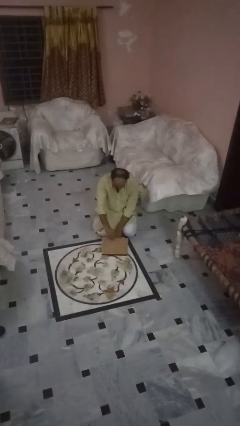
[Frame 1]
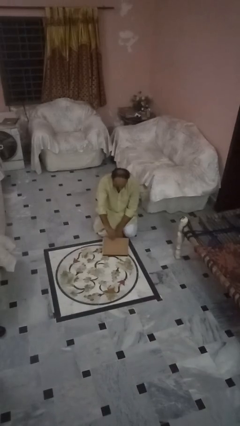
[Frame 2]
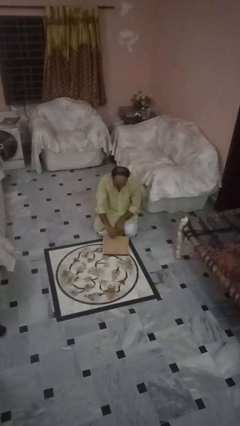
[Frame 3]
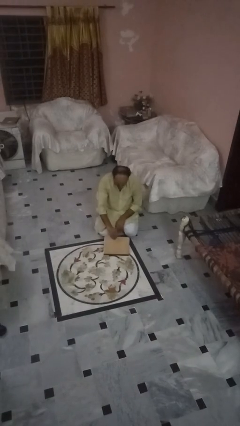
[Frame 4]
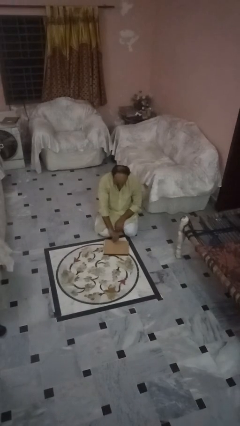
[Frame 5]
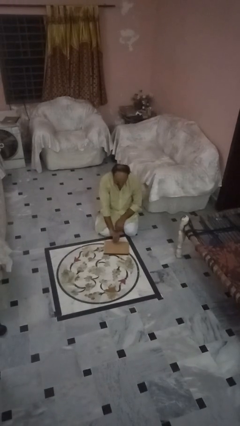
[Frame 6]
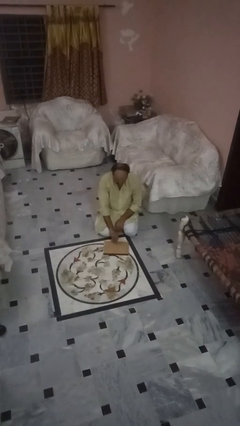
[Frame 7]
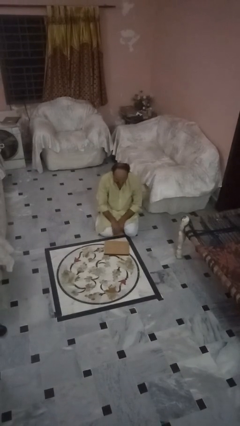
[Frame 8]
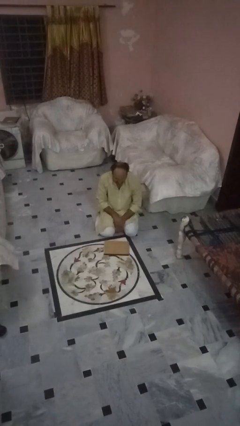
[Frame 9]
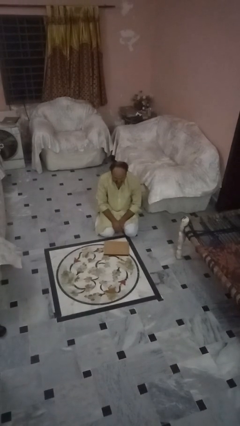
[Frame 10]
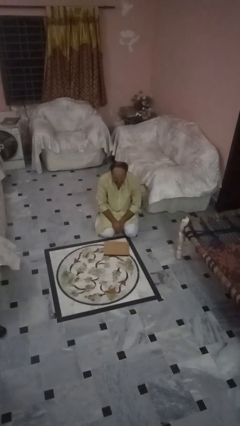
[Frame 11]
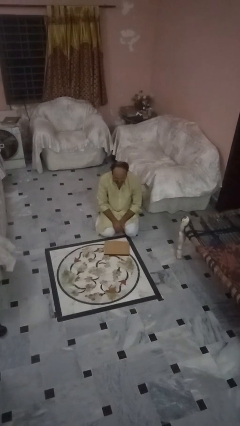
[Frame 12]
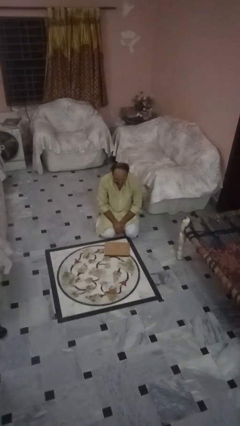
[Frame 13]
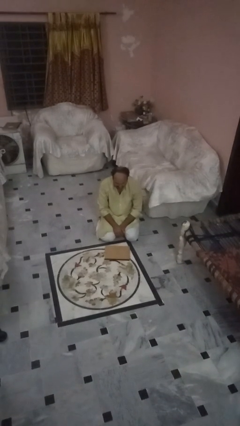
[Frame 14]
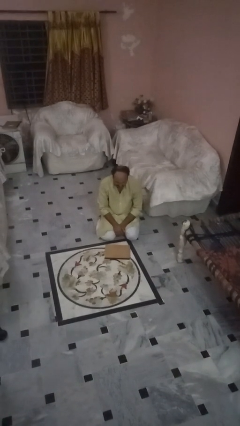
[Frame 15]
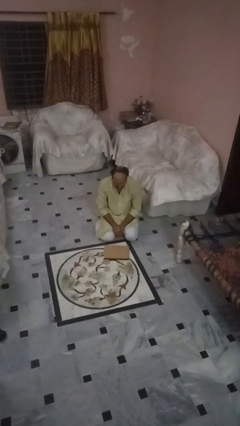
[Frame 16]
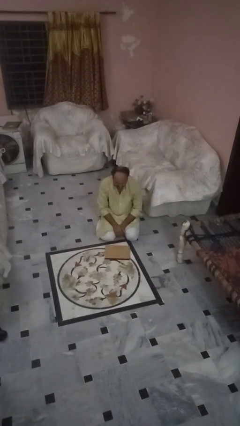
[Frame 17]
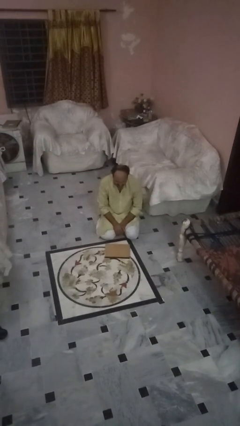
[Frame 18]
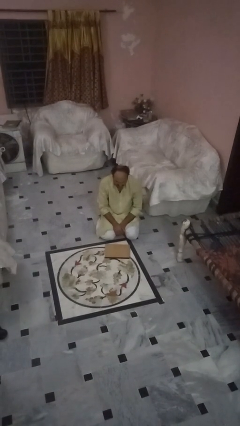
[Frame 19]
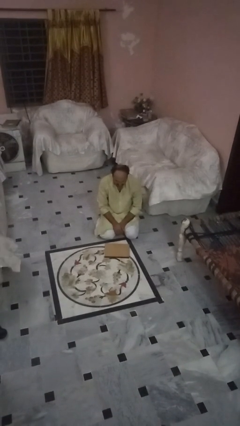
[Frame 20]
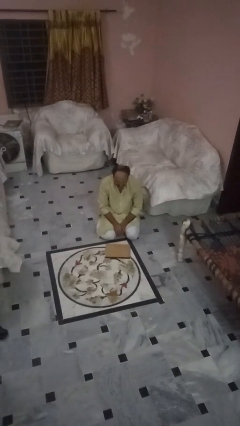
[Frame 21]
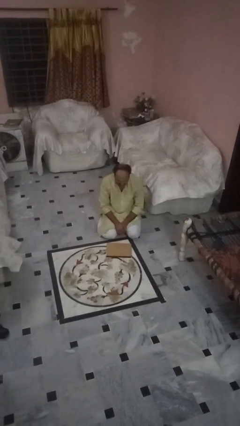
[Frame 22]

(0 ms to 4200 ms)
person closes laptop

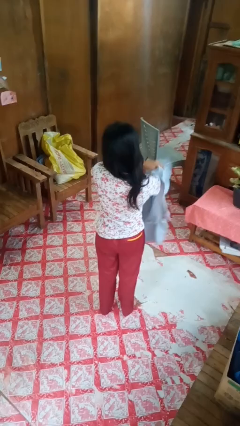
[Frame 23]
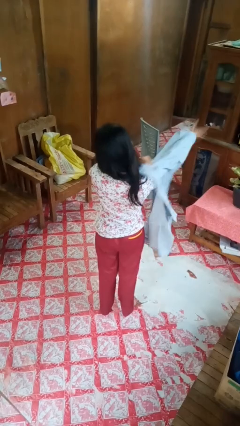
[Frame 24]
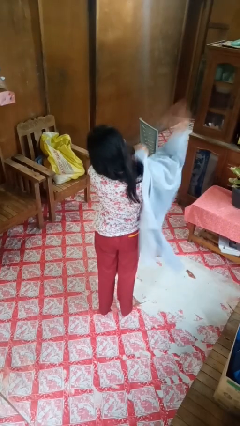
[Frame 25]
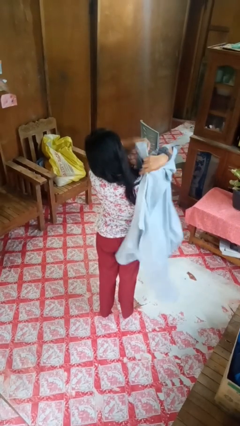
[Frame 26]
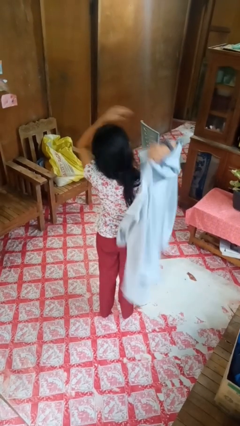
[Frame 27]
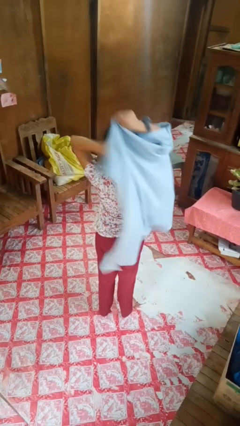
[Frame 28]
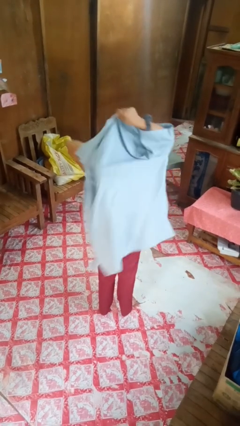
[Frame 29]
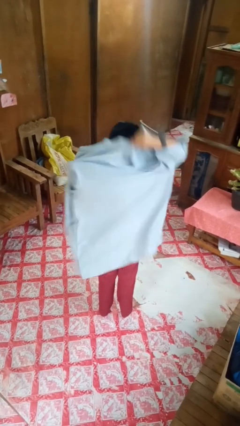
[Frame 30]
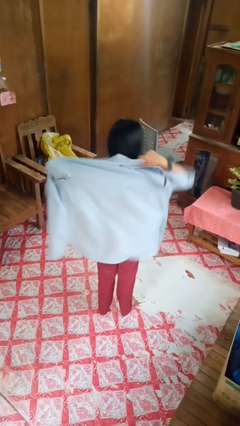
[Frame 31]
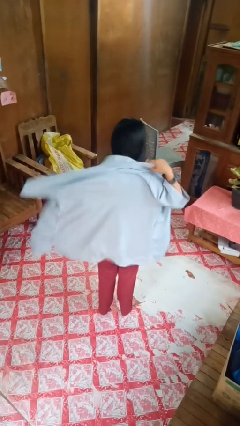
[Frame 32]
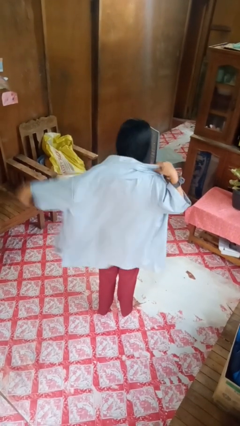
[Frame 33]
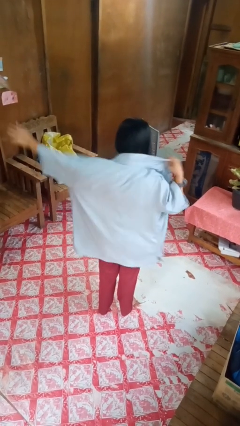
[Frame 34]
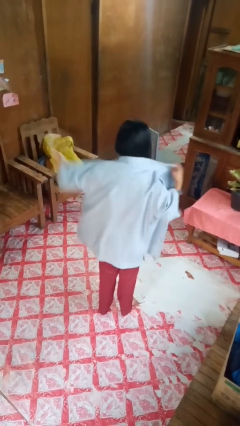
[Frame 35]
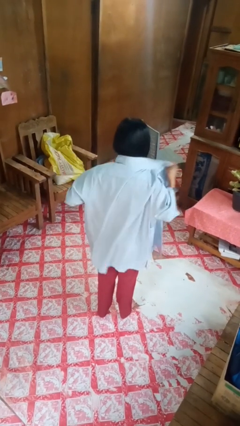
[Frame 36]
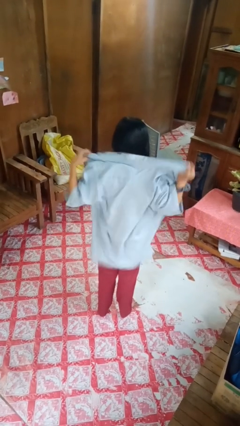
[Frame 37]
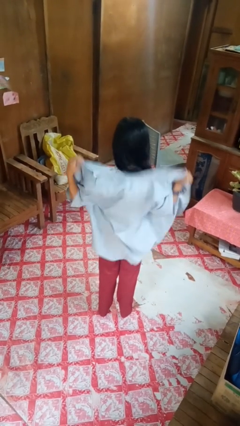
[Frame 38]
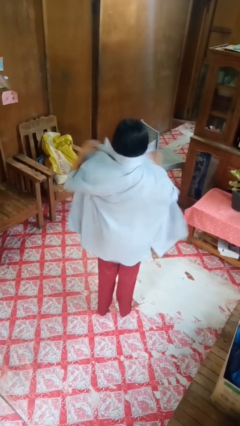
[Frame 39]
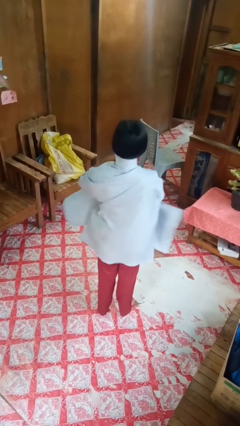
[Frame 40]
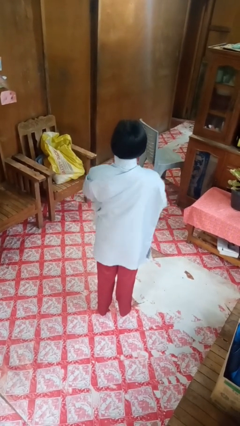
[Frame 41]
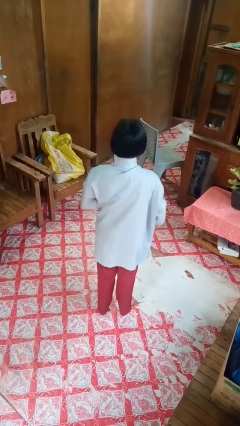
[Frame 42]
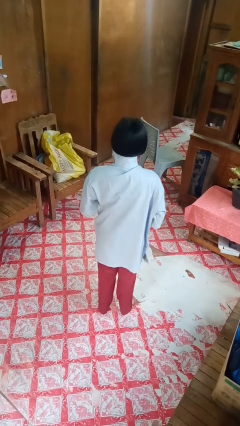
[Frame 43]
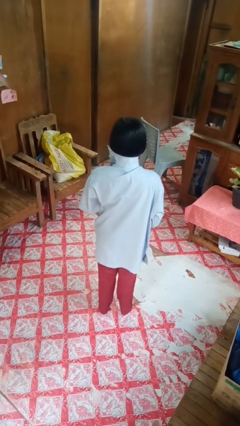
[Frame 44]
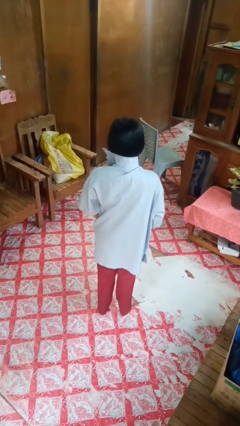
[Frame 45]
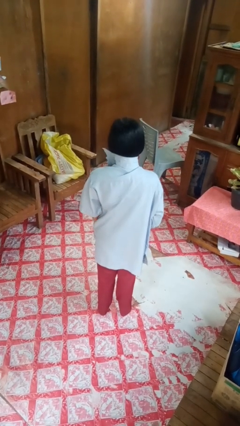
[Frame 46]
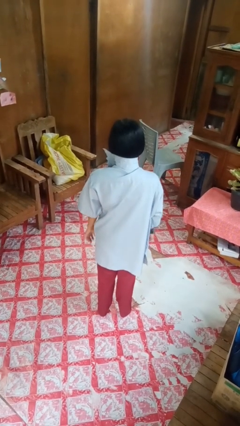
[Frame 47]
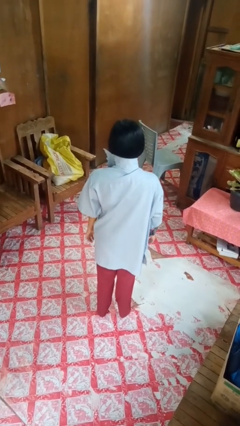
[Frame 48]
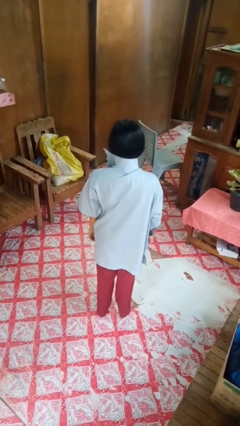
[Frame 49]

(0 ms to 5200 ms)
person puts on shirt

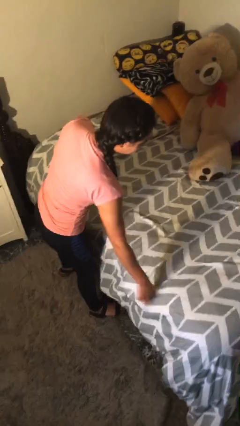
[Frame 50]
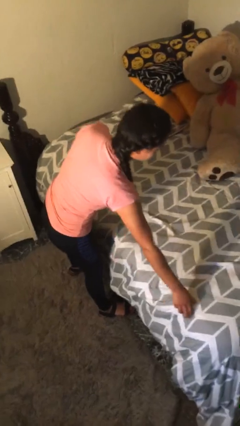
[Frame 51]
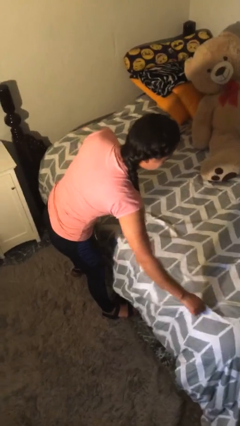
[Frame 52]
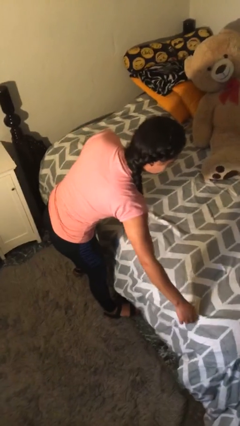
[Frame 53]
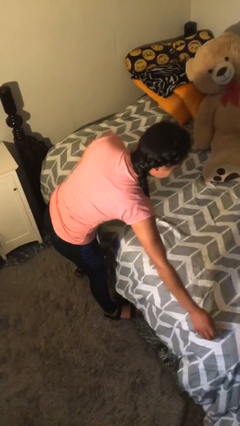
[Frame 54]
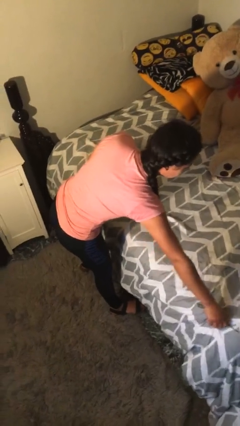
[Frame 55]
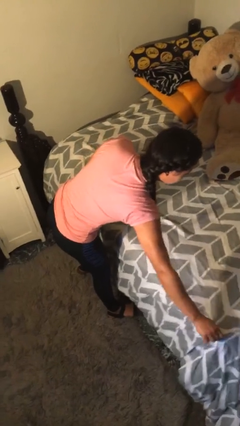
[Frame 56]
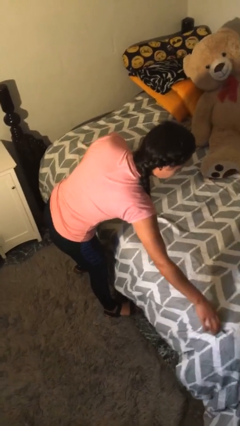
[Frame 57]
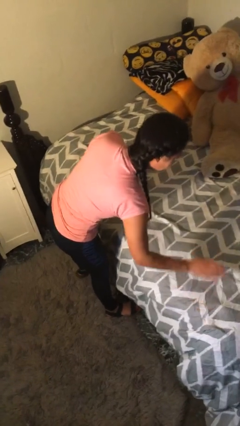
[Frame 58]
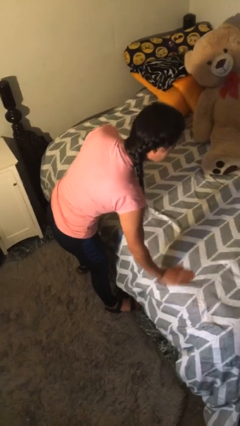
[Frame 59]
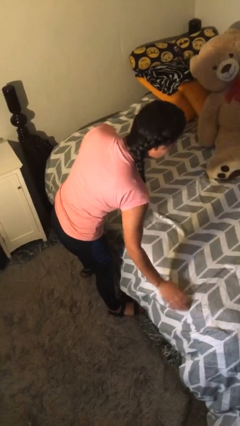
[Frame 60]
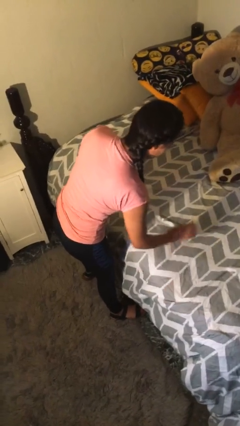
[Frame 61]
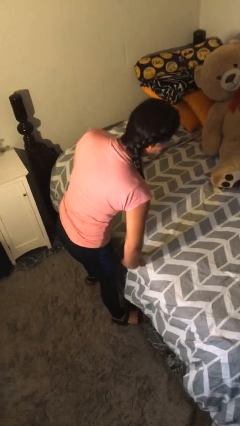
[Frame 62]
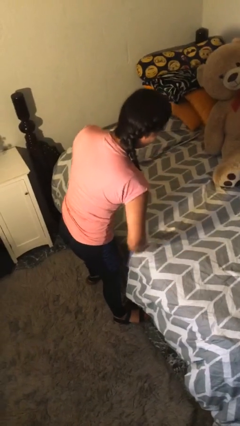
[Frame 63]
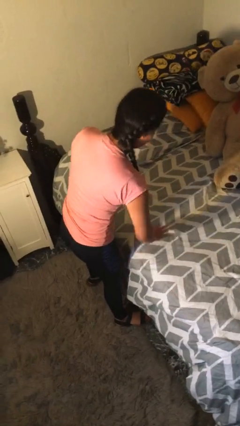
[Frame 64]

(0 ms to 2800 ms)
person makes bed

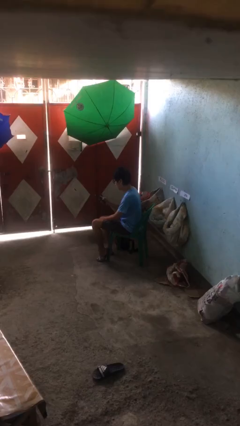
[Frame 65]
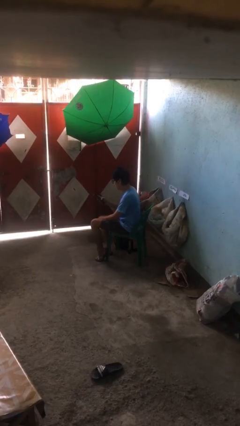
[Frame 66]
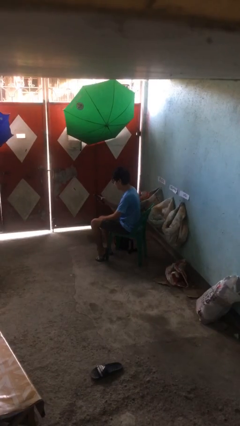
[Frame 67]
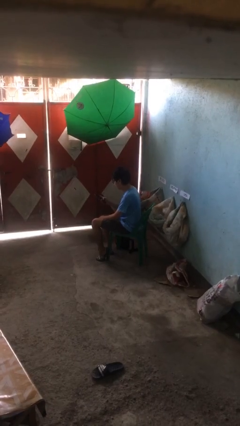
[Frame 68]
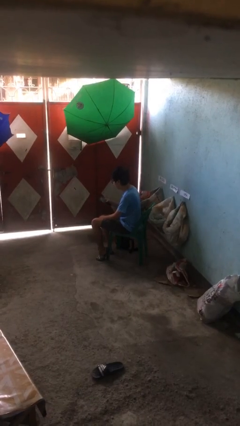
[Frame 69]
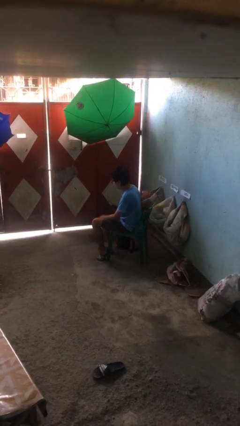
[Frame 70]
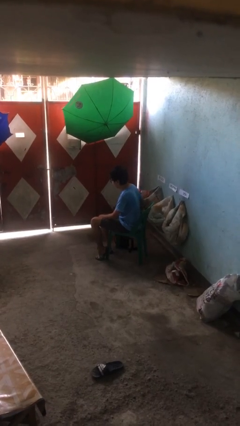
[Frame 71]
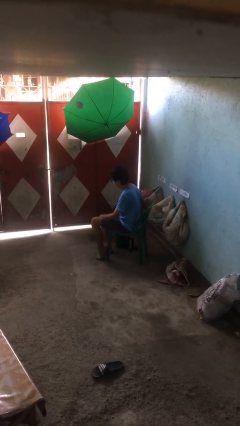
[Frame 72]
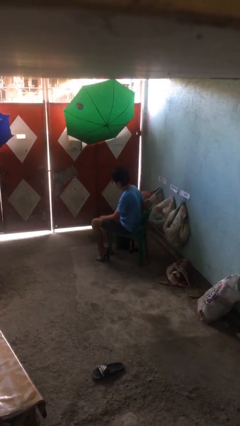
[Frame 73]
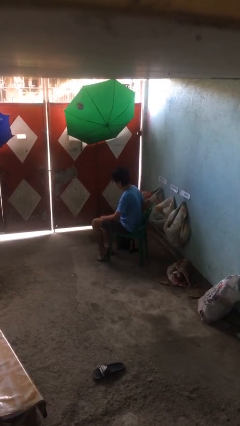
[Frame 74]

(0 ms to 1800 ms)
person puts phone into pocket

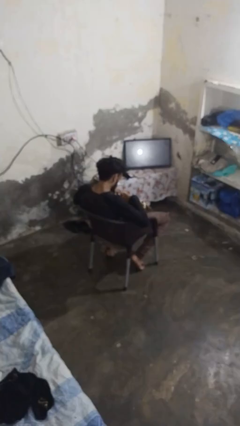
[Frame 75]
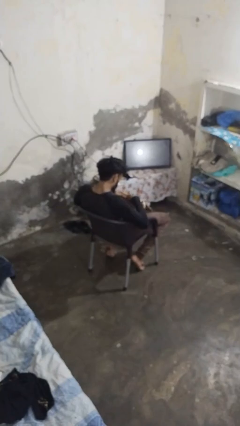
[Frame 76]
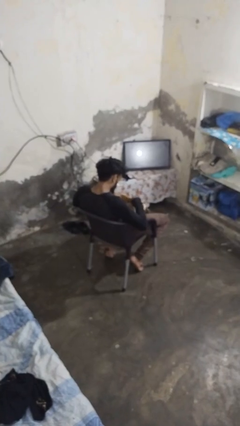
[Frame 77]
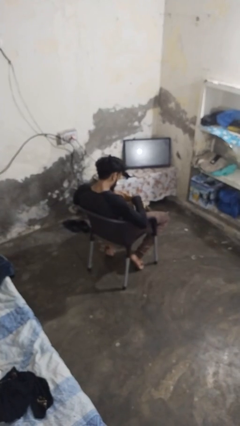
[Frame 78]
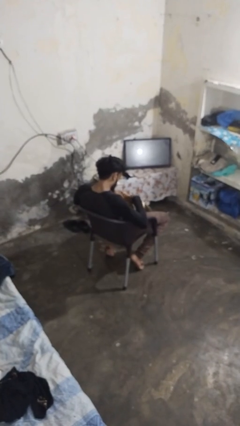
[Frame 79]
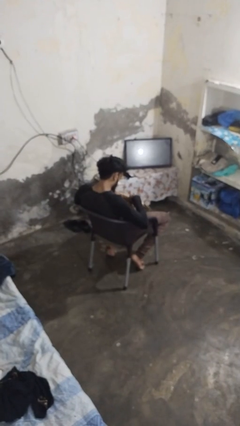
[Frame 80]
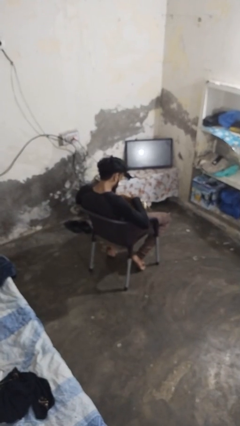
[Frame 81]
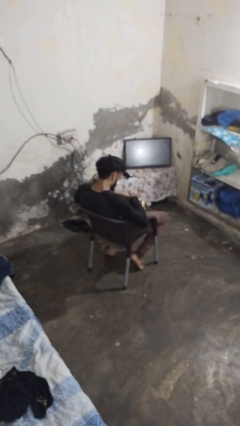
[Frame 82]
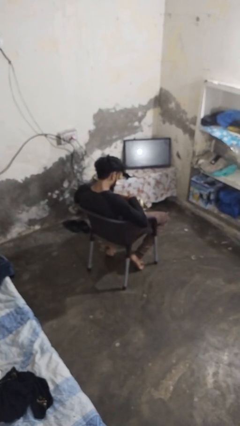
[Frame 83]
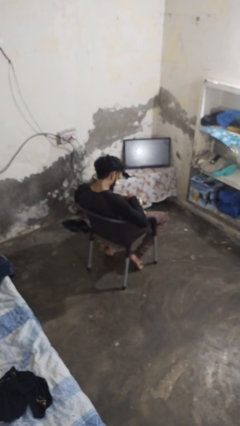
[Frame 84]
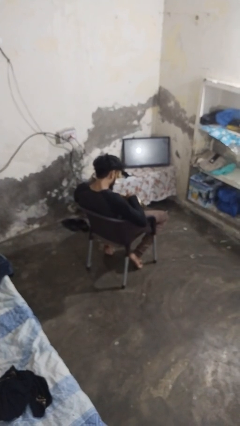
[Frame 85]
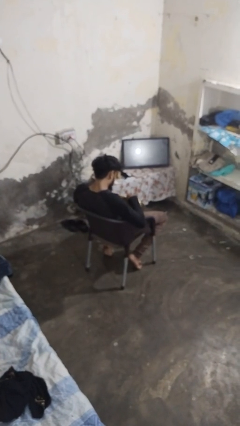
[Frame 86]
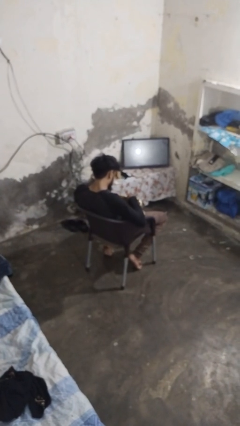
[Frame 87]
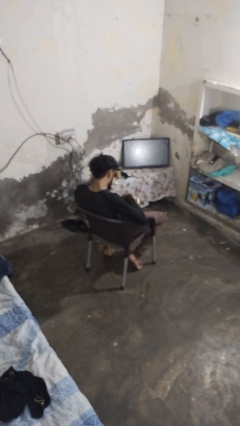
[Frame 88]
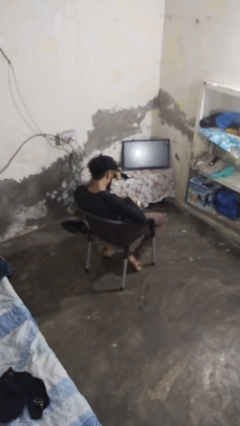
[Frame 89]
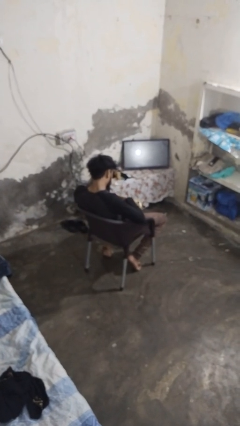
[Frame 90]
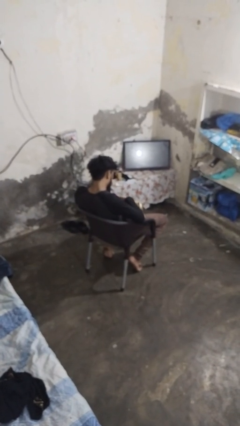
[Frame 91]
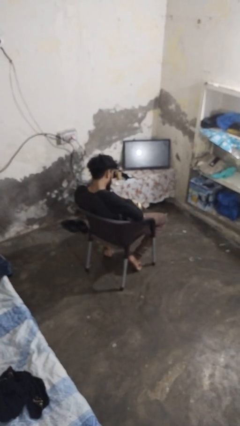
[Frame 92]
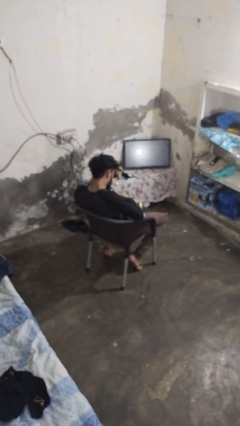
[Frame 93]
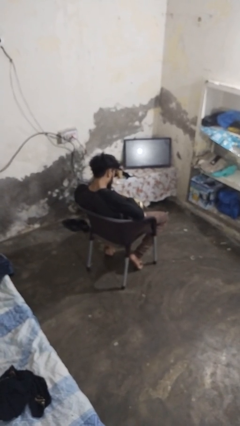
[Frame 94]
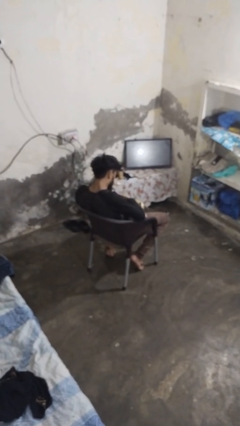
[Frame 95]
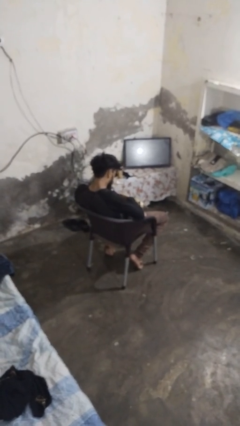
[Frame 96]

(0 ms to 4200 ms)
person searches in purse
